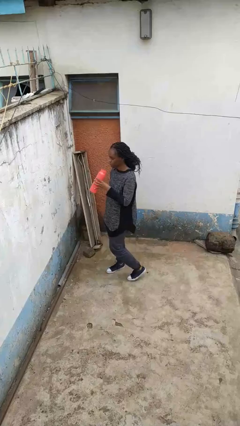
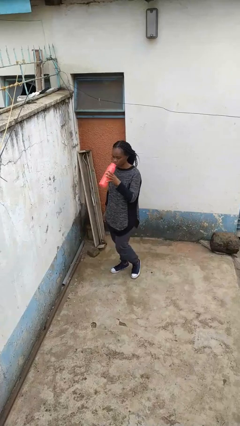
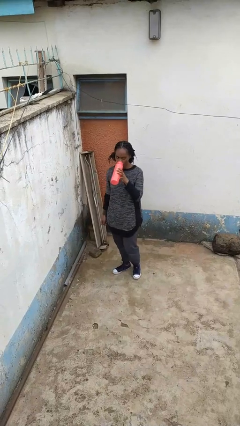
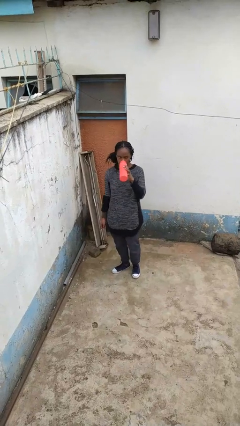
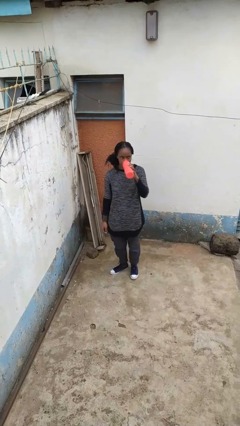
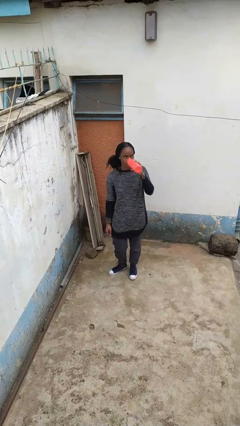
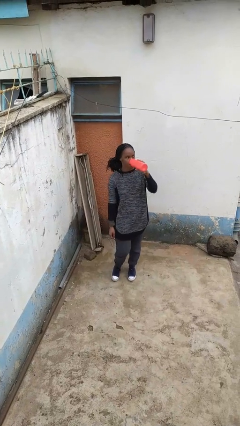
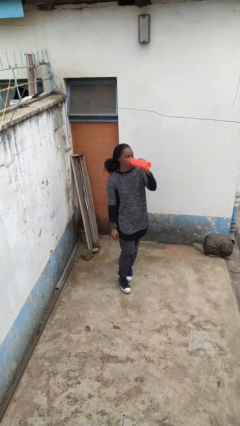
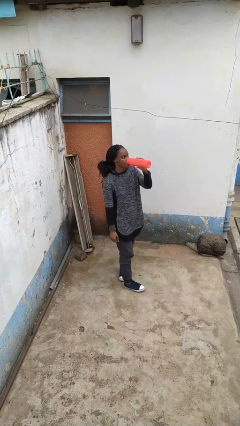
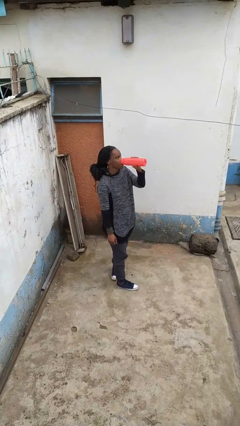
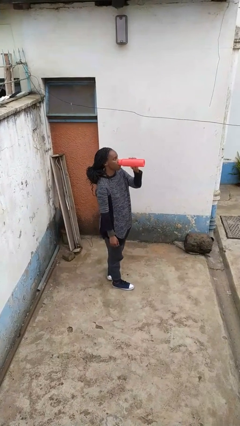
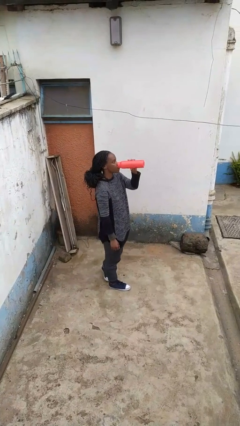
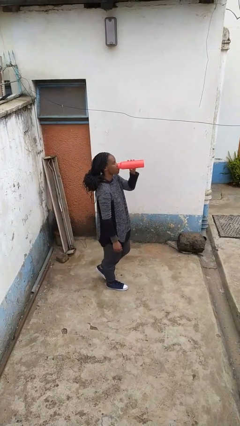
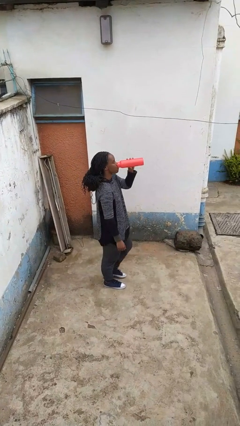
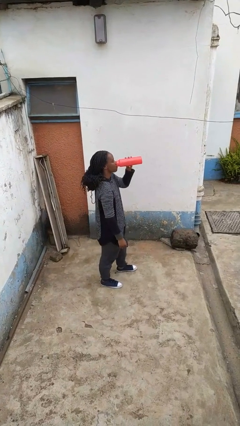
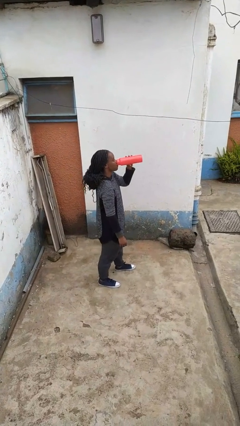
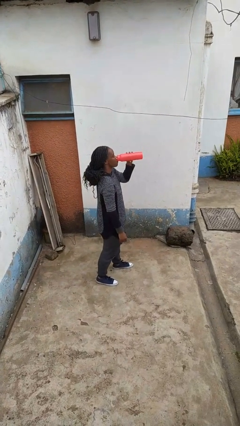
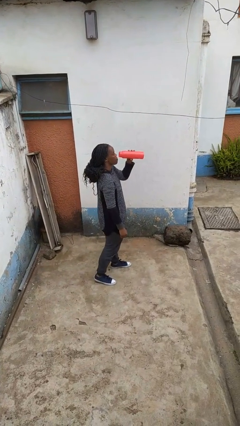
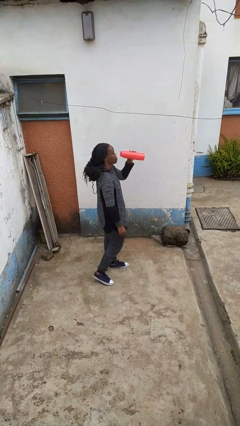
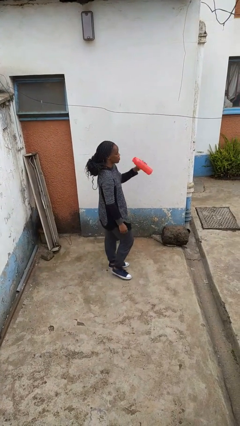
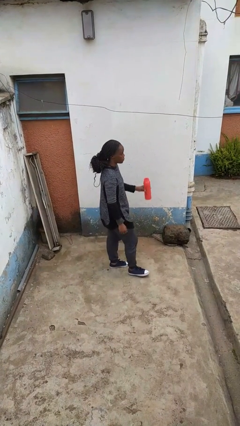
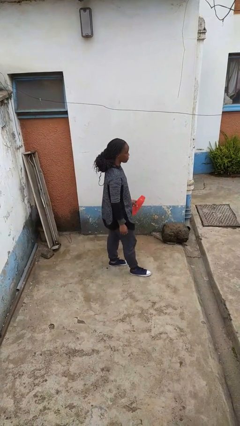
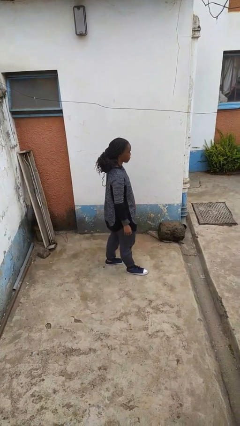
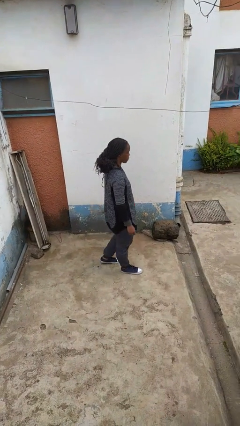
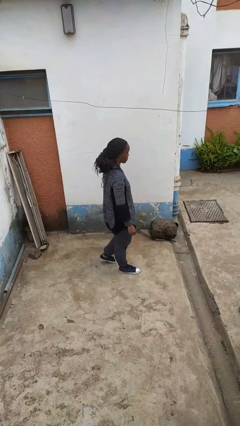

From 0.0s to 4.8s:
person drinks from bottle

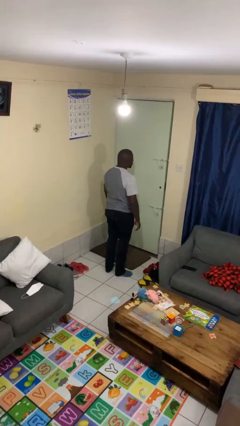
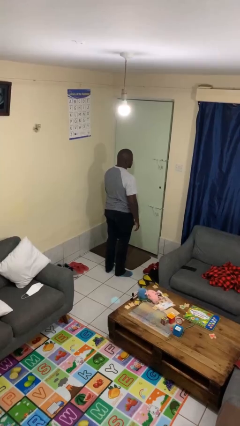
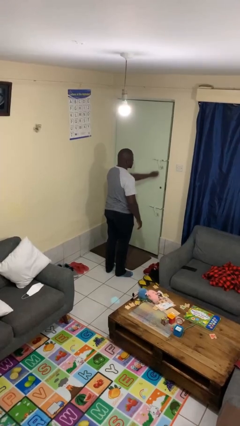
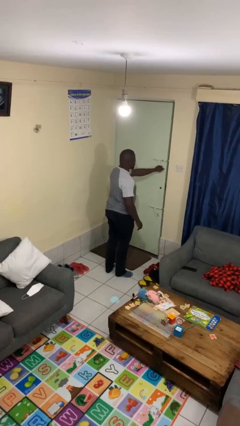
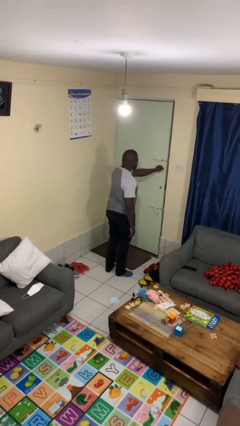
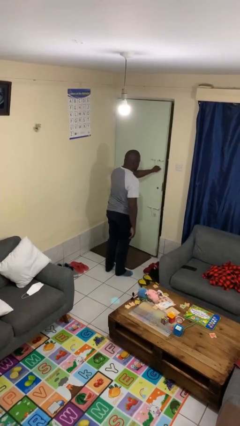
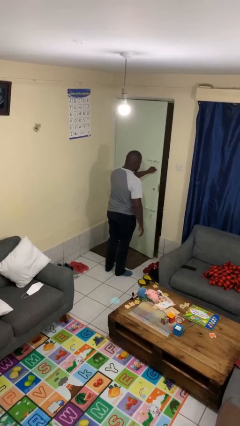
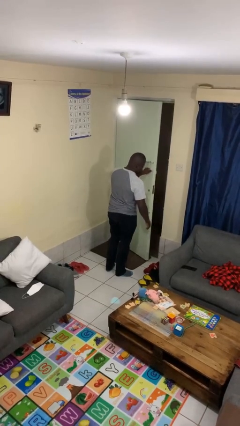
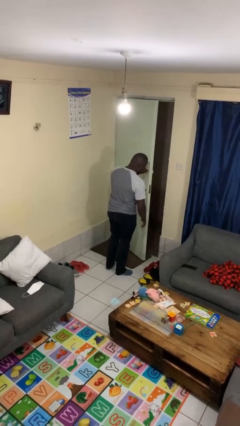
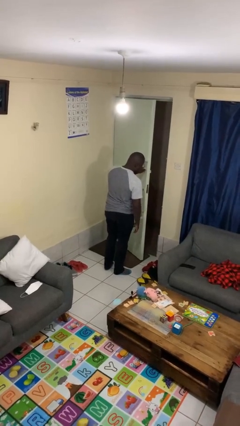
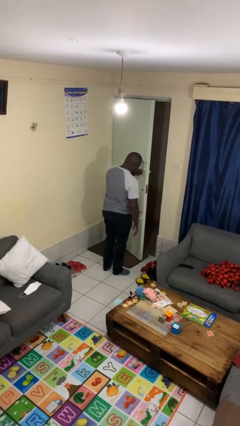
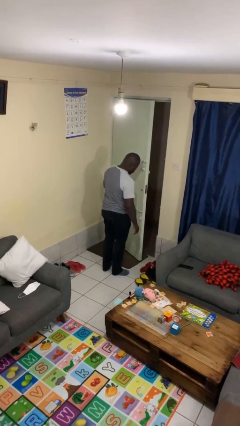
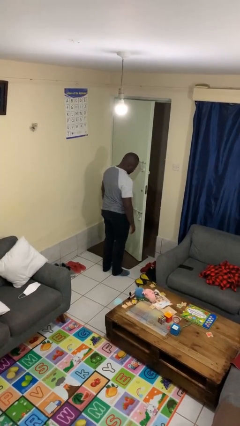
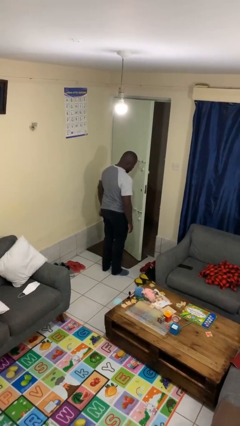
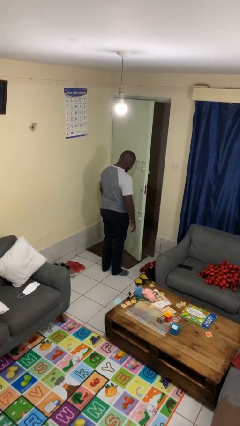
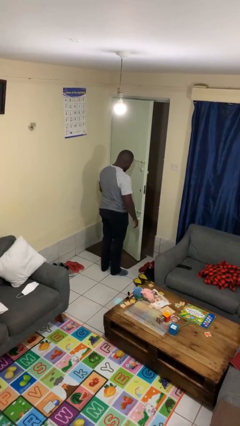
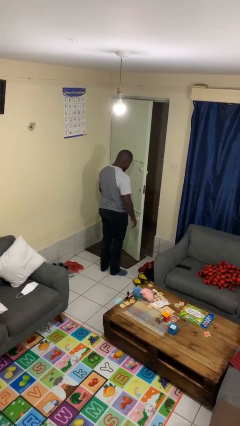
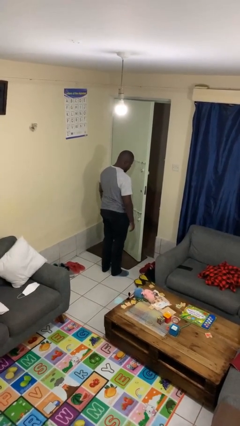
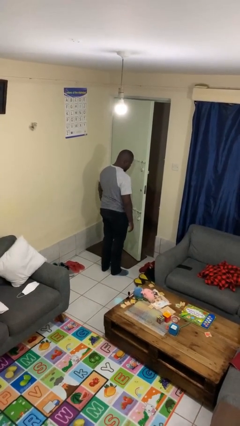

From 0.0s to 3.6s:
person opens facility door

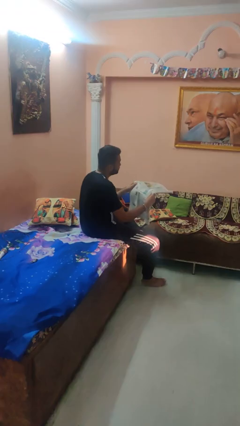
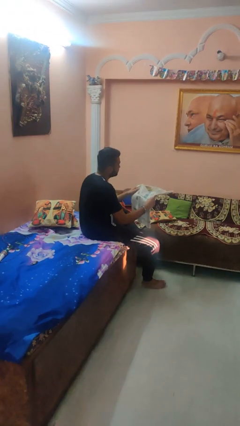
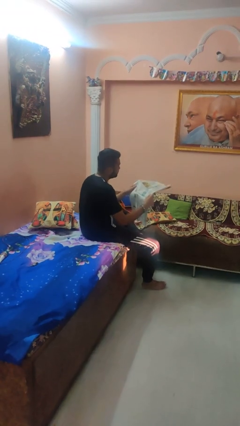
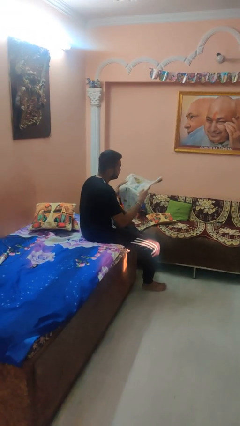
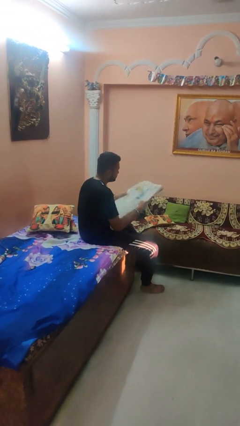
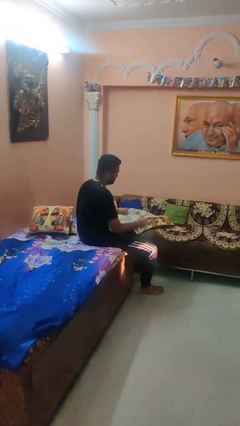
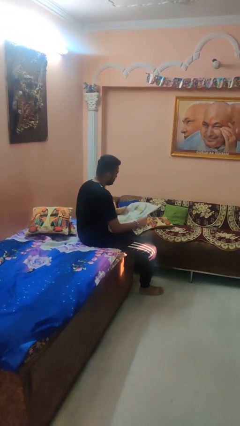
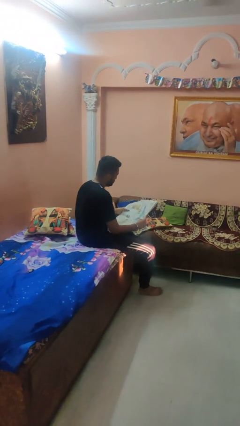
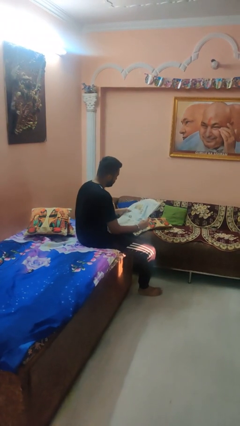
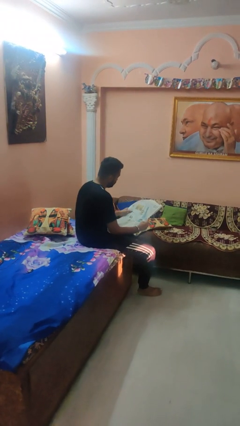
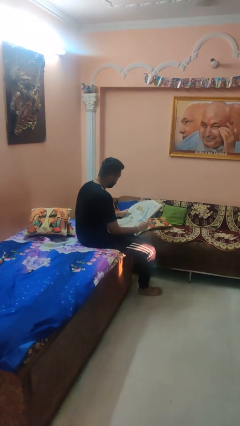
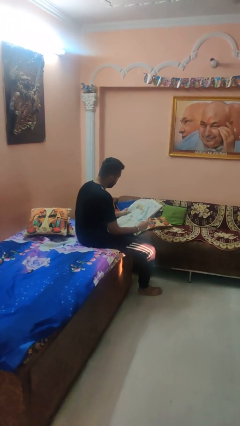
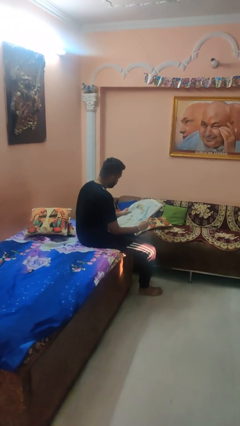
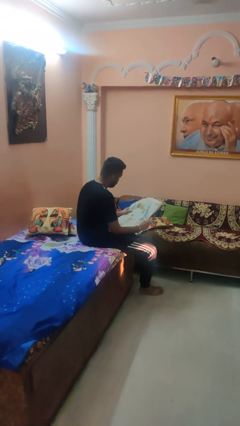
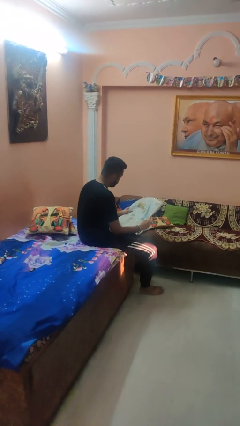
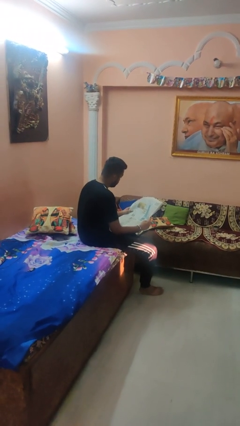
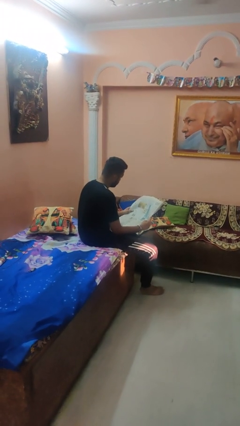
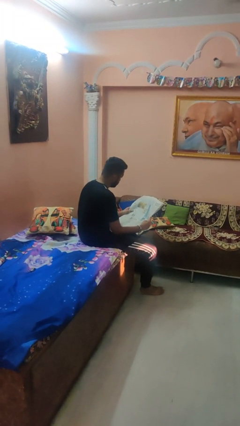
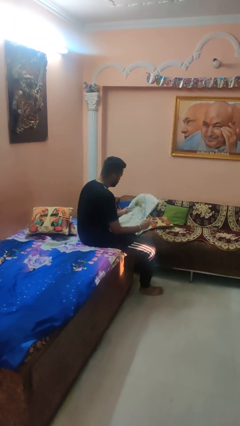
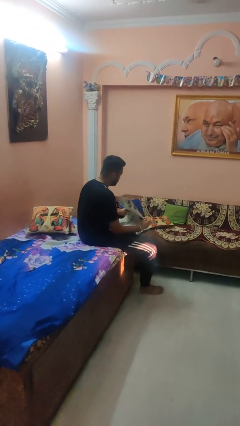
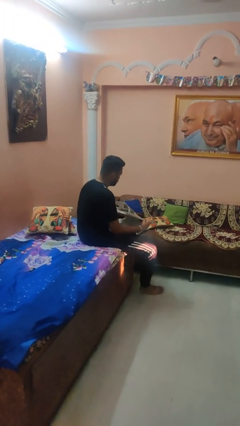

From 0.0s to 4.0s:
person reads newspaper

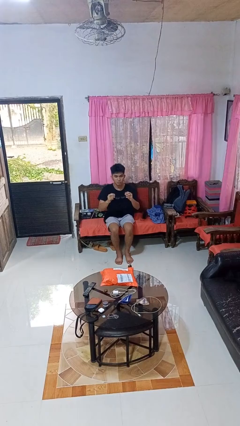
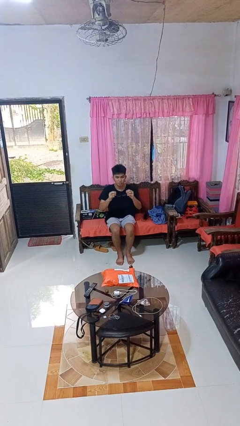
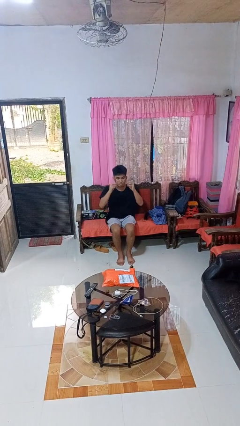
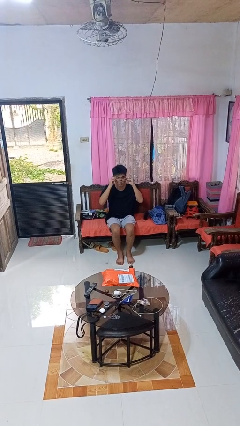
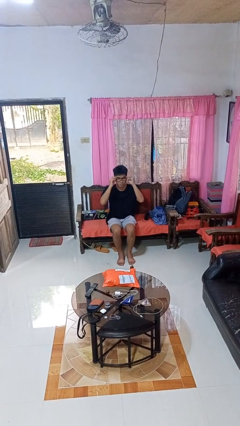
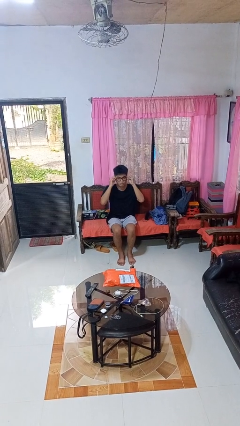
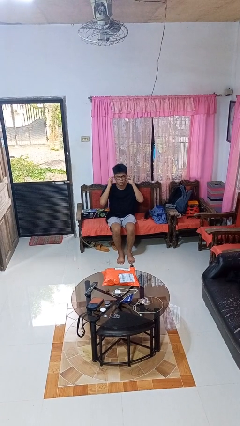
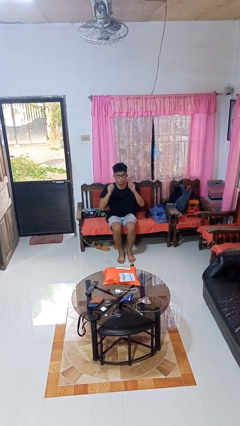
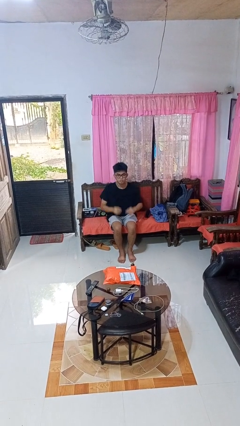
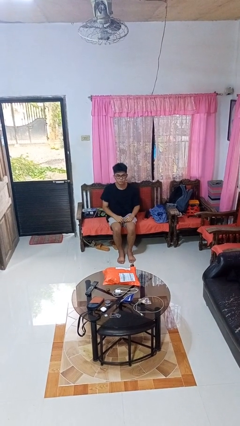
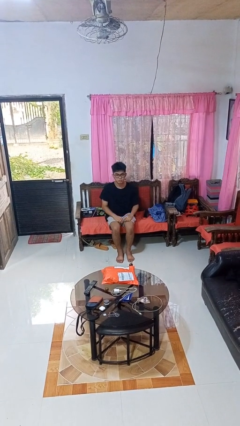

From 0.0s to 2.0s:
person puts on glasses

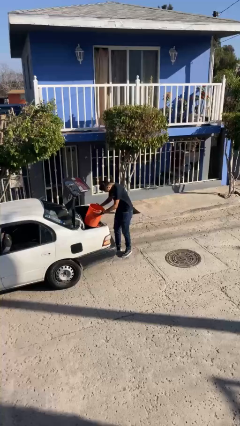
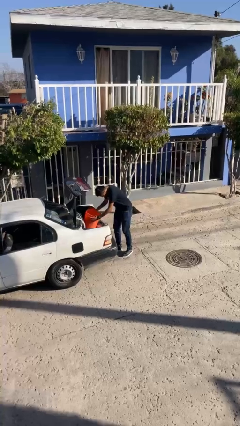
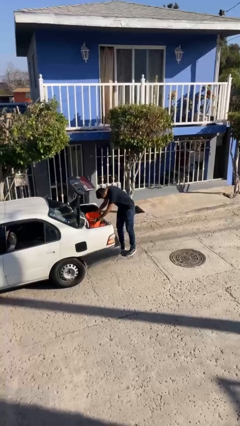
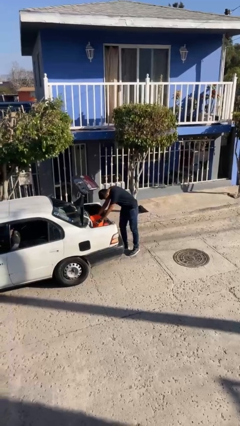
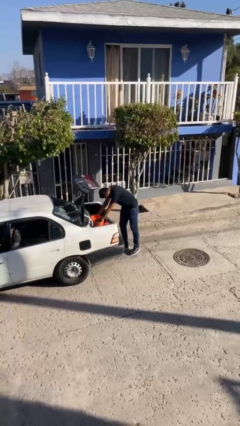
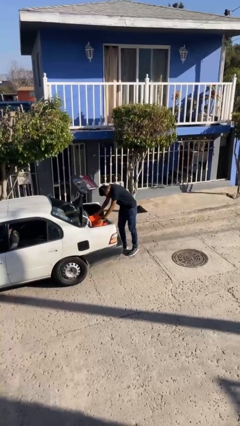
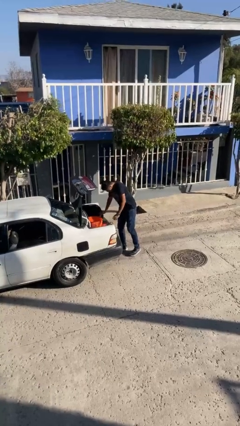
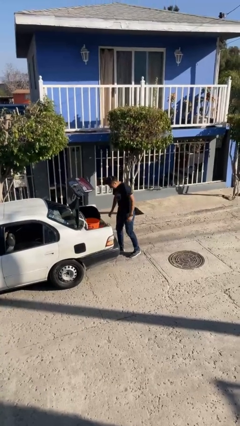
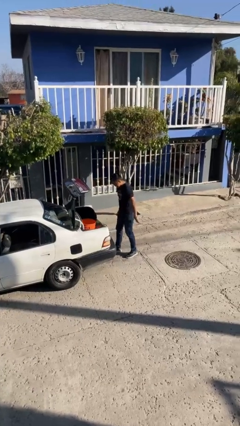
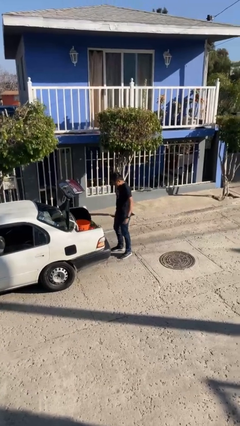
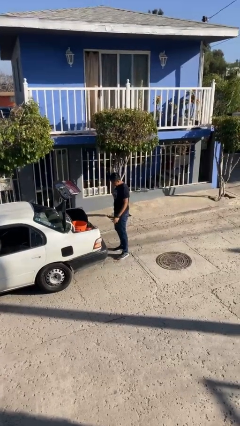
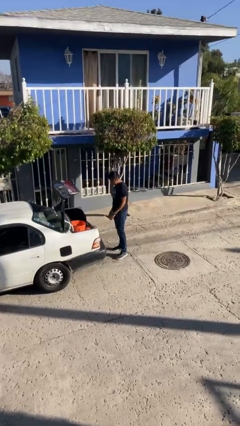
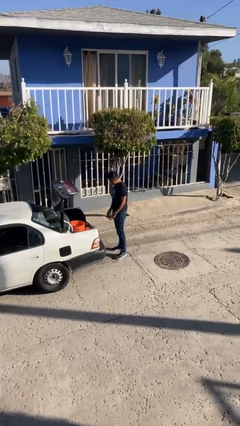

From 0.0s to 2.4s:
person loads car

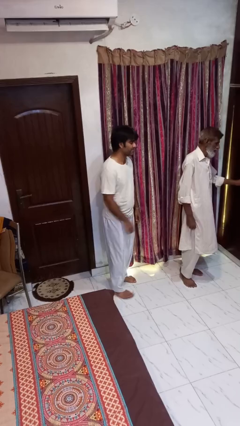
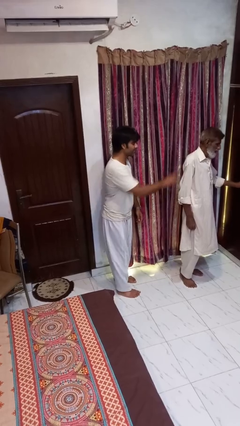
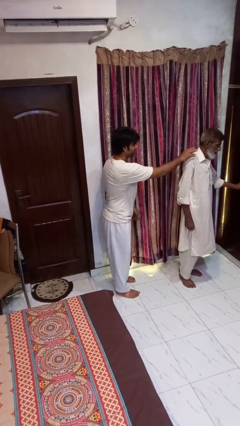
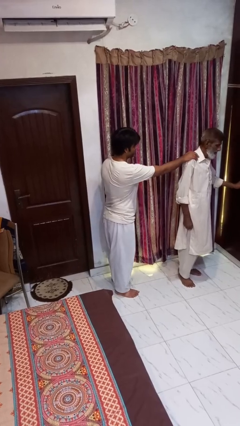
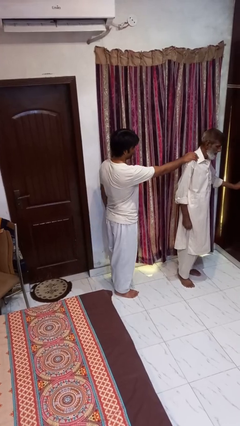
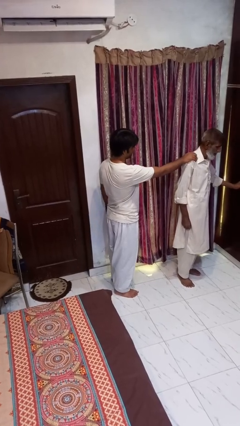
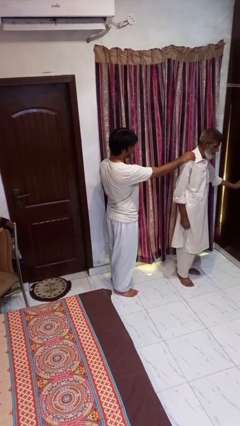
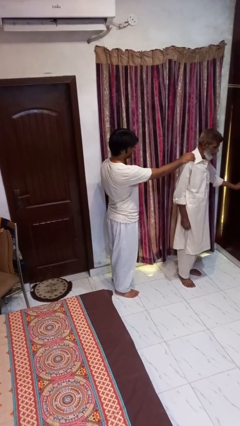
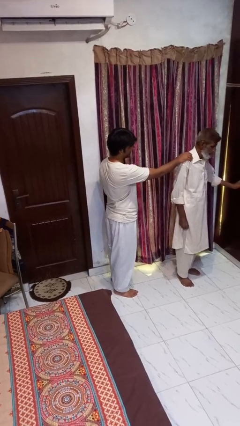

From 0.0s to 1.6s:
person grabs person by shoulder
